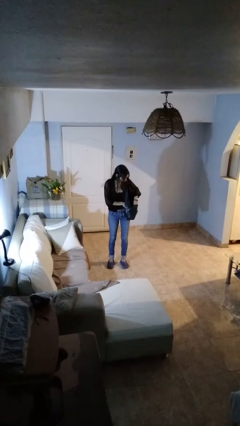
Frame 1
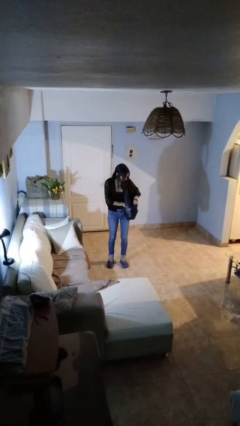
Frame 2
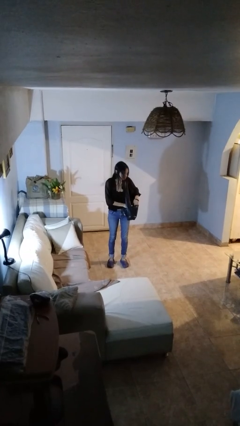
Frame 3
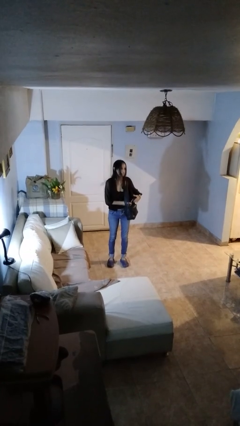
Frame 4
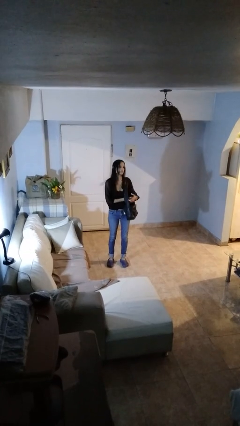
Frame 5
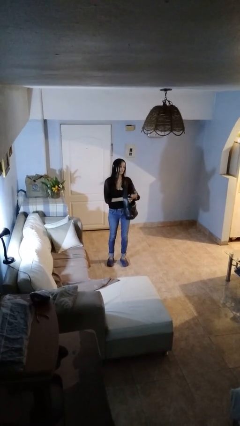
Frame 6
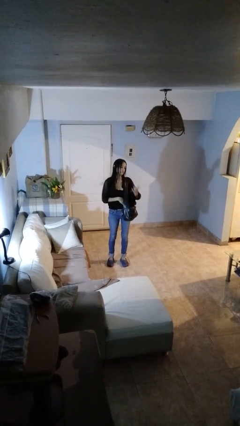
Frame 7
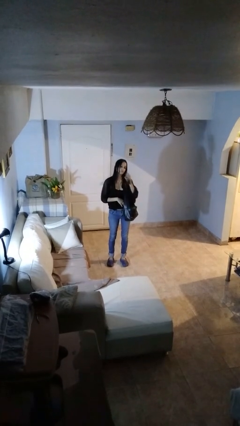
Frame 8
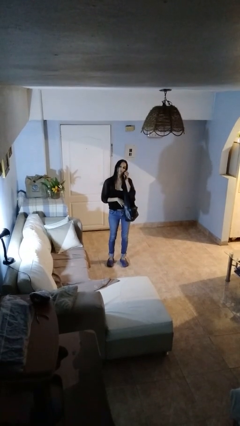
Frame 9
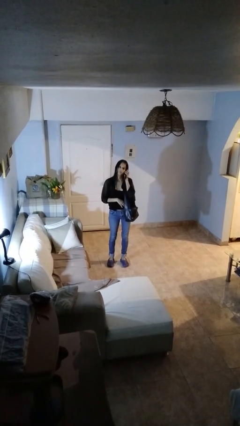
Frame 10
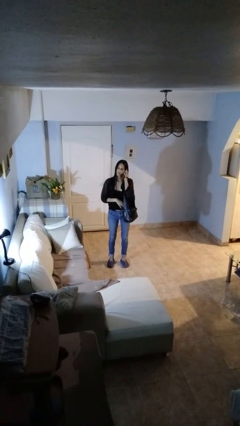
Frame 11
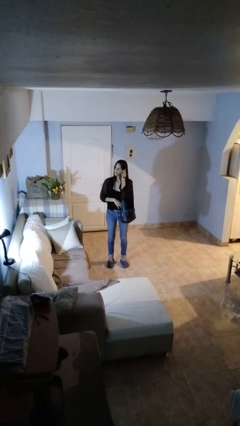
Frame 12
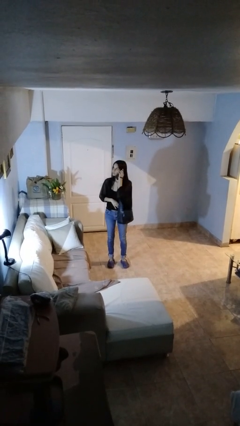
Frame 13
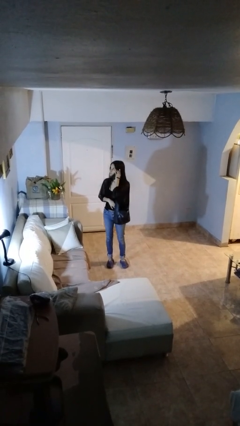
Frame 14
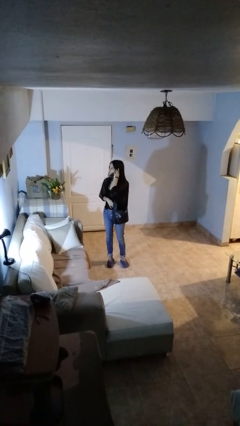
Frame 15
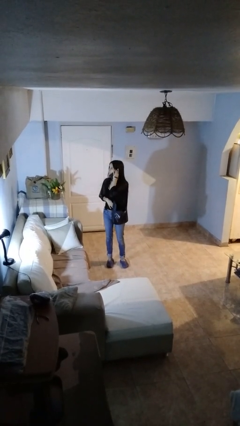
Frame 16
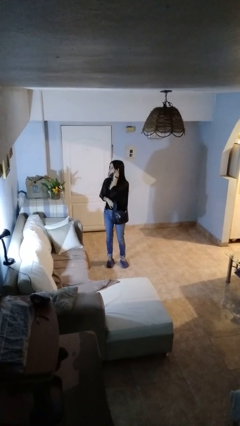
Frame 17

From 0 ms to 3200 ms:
person takes object from purse

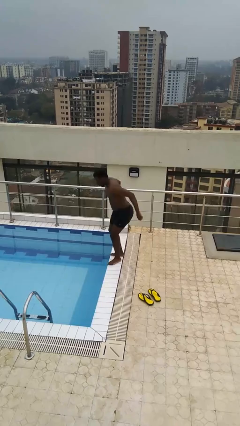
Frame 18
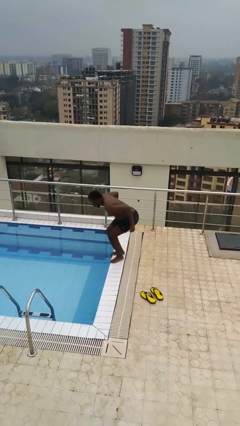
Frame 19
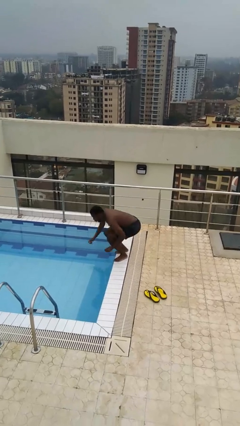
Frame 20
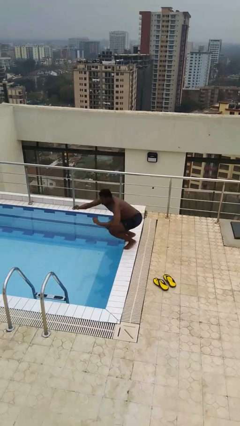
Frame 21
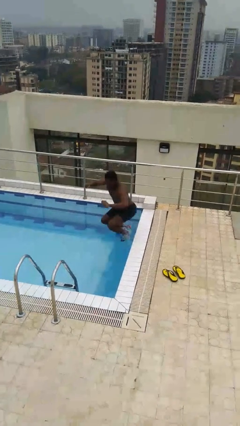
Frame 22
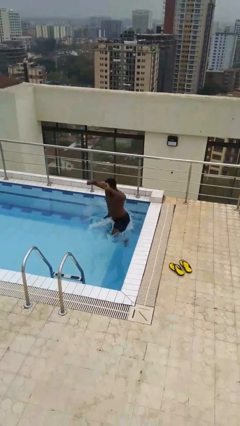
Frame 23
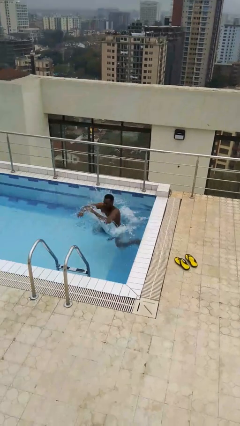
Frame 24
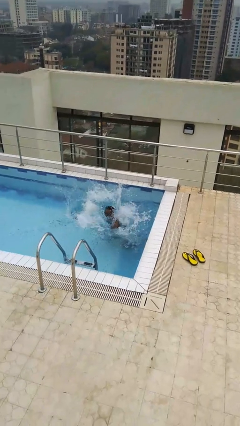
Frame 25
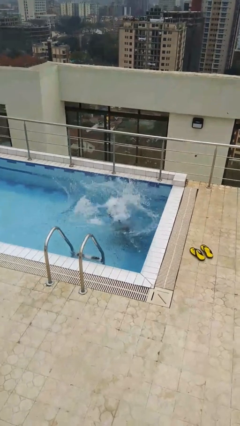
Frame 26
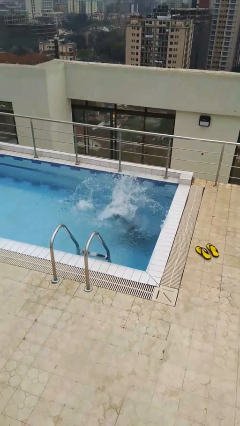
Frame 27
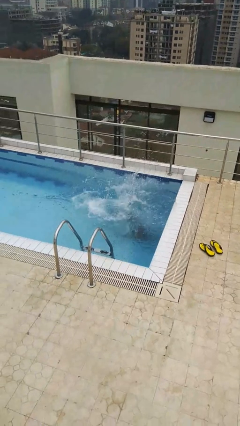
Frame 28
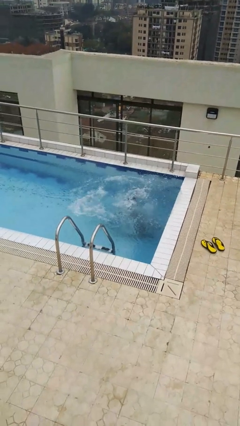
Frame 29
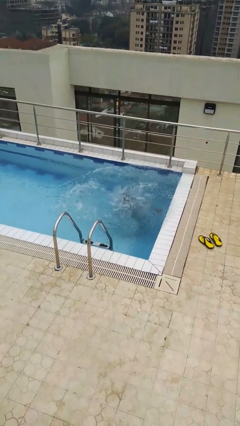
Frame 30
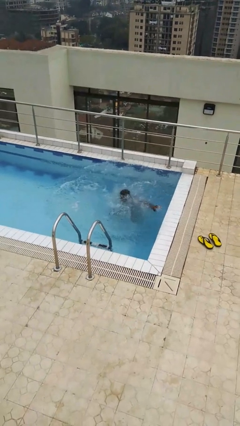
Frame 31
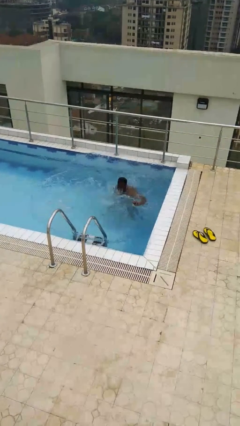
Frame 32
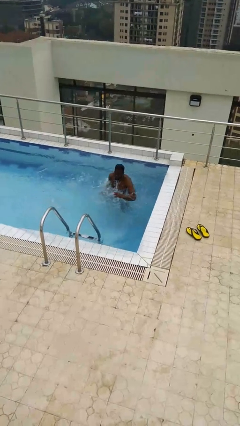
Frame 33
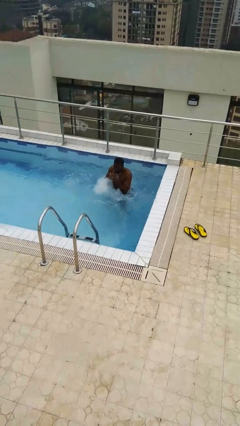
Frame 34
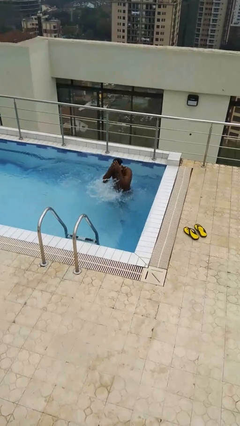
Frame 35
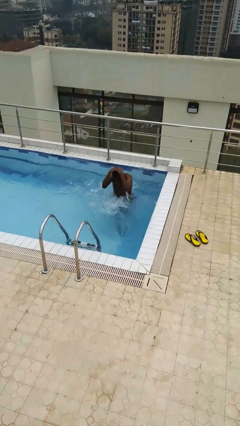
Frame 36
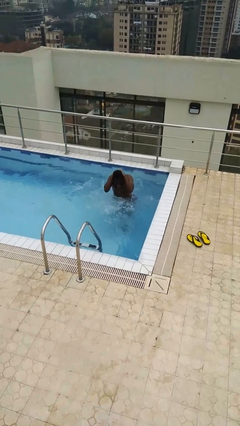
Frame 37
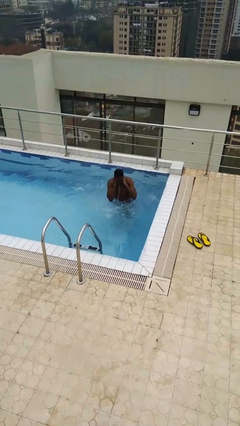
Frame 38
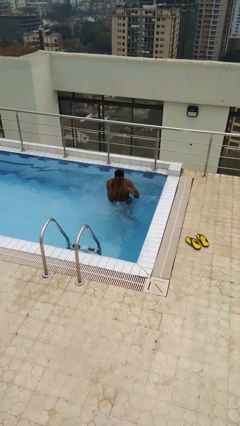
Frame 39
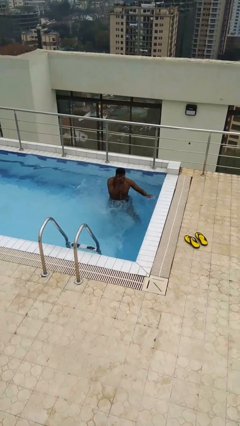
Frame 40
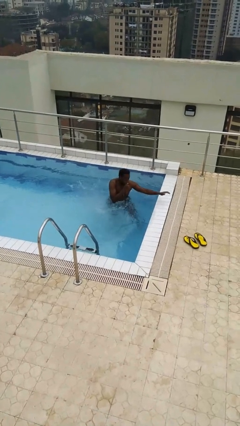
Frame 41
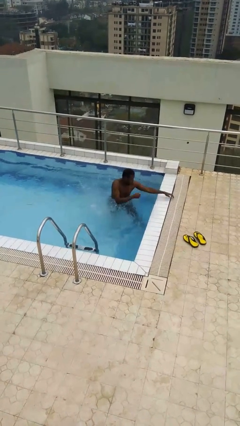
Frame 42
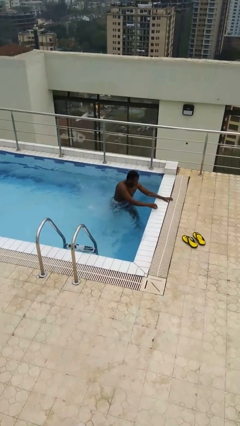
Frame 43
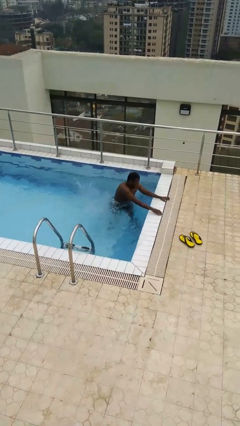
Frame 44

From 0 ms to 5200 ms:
person jumps into pool

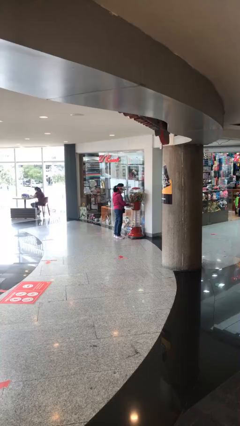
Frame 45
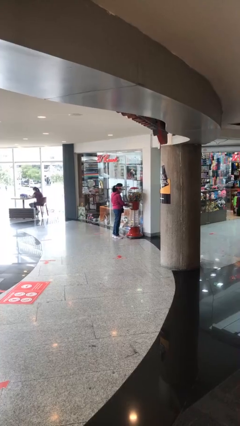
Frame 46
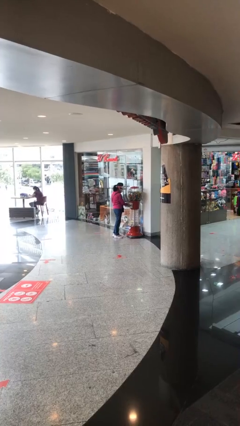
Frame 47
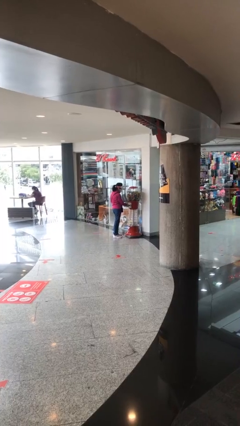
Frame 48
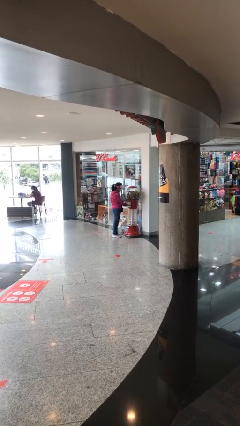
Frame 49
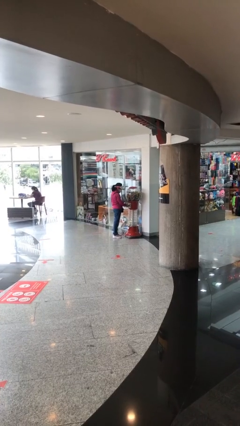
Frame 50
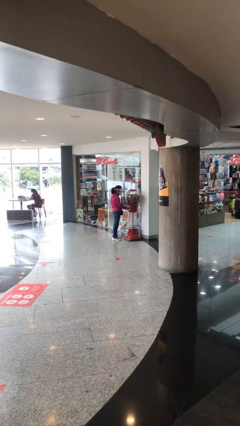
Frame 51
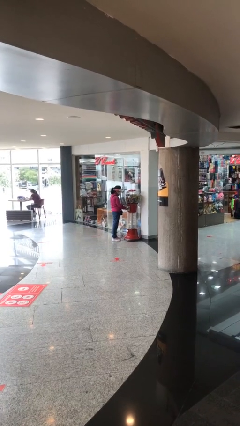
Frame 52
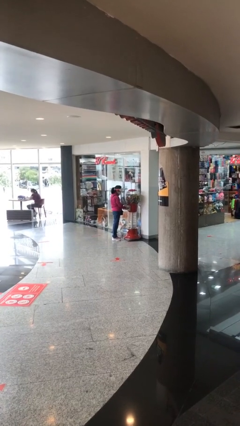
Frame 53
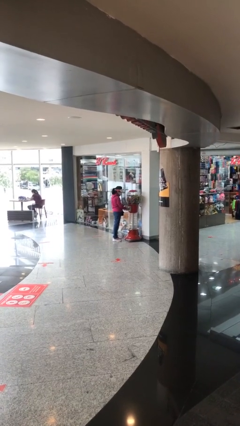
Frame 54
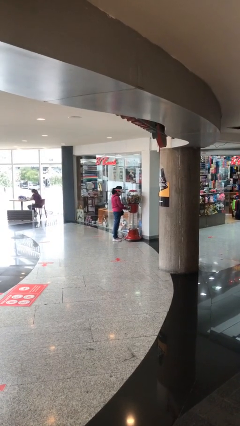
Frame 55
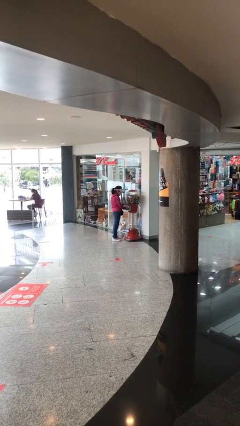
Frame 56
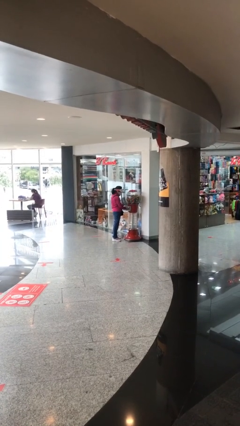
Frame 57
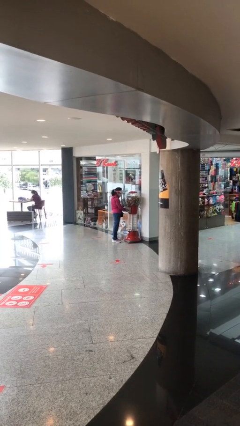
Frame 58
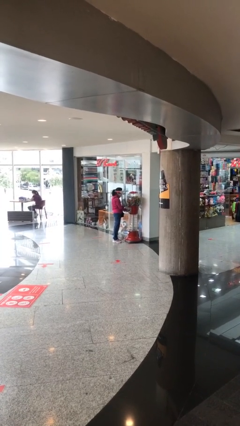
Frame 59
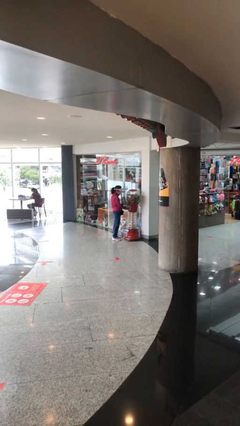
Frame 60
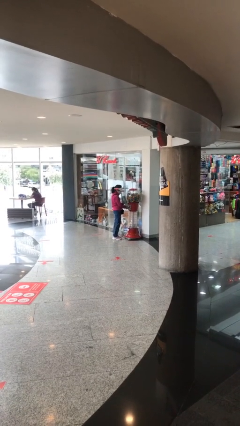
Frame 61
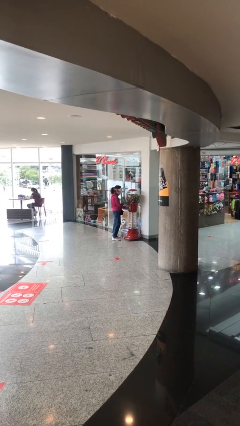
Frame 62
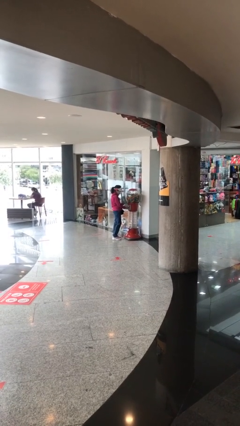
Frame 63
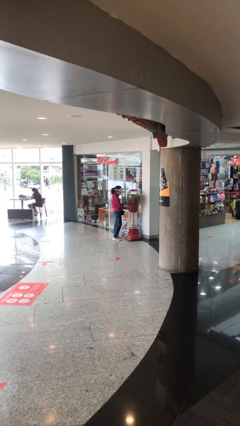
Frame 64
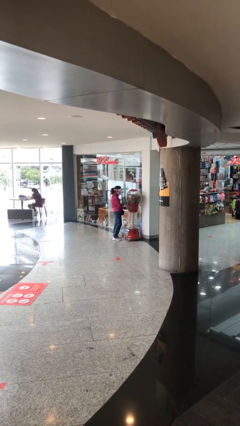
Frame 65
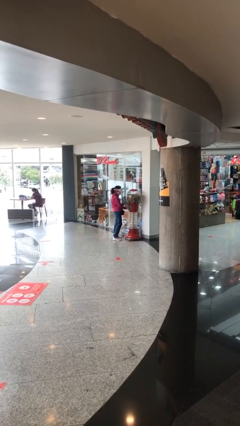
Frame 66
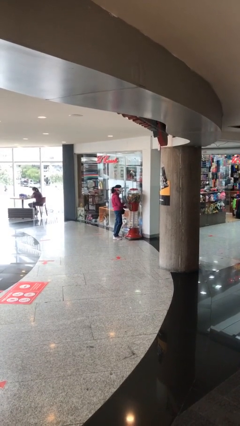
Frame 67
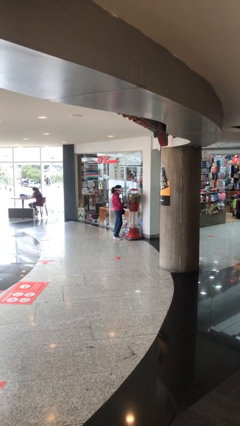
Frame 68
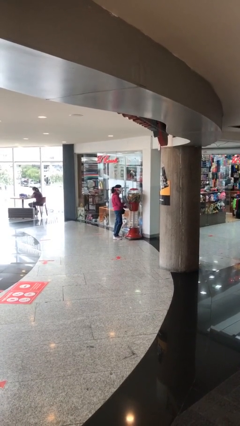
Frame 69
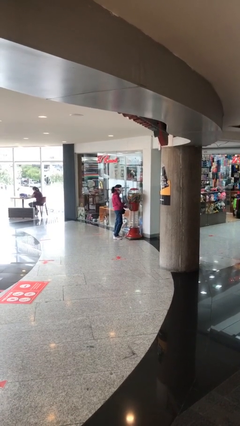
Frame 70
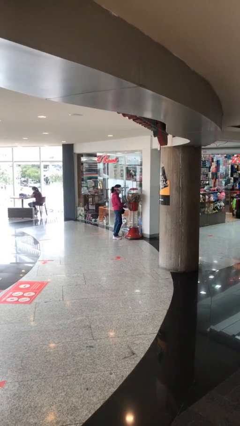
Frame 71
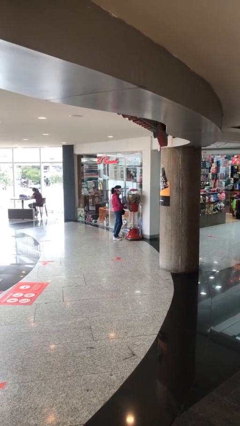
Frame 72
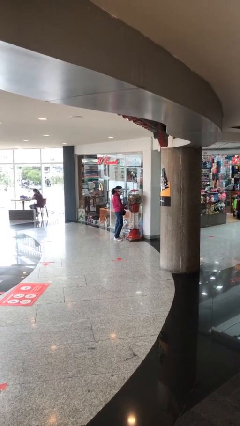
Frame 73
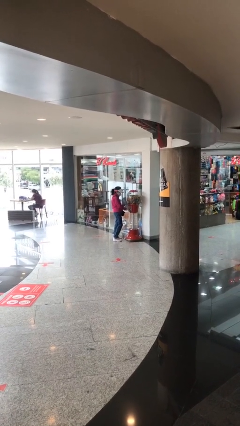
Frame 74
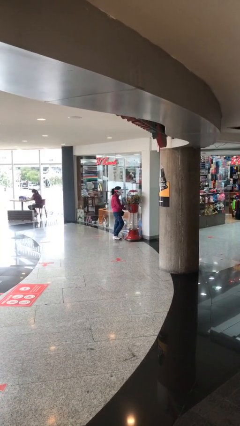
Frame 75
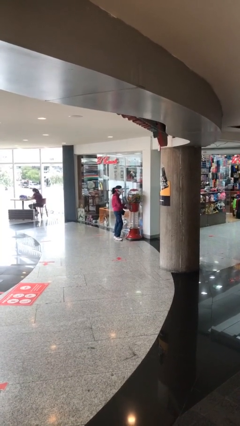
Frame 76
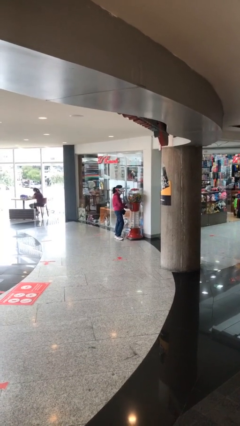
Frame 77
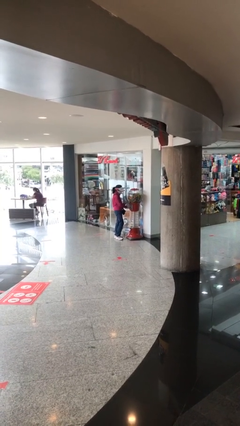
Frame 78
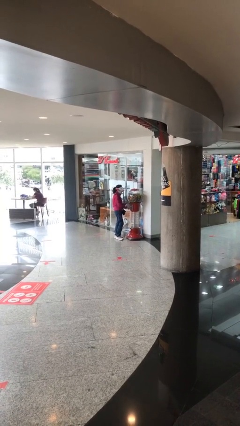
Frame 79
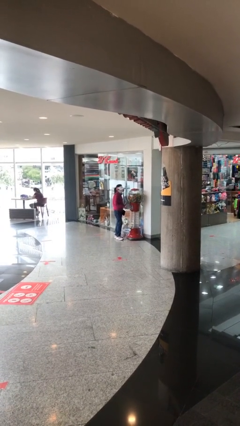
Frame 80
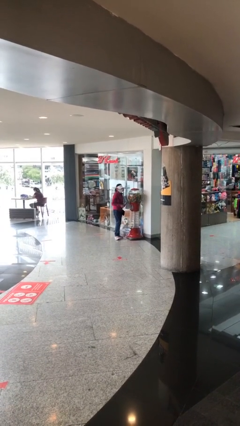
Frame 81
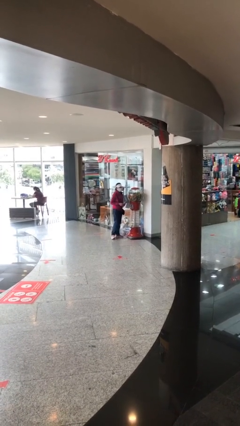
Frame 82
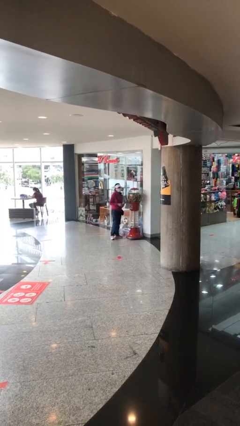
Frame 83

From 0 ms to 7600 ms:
person purchases from machine

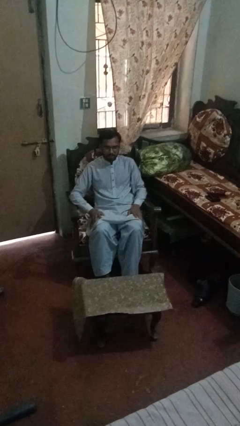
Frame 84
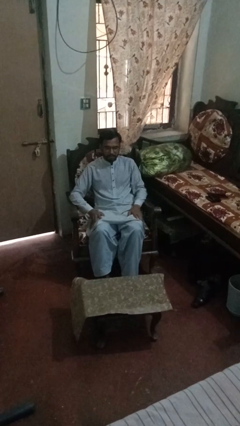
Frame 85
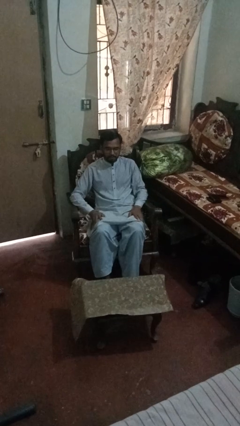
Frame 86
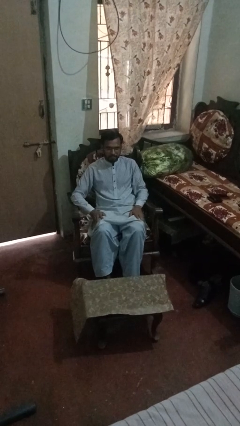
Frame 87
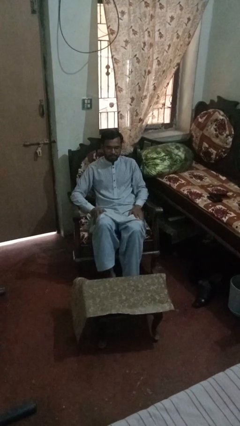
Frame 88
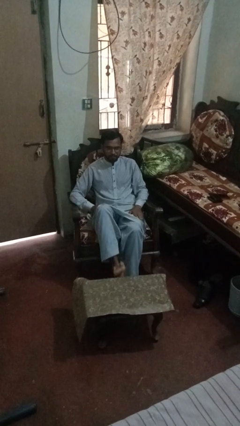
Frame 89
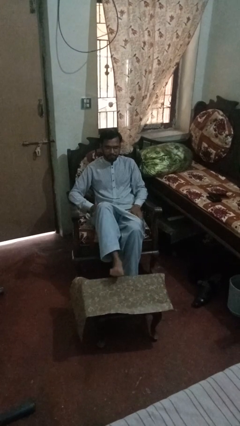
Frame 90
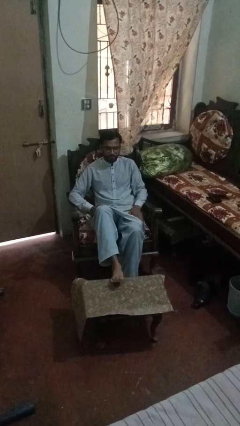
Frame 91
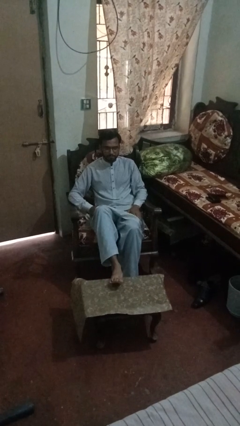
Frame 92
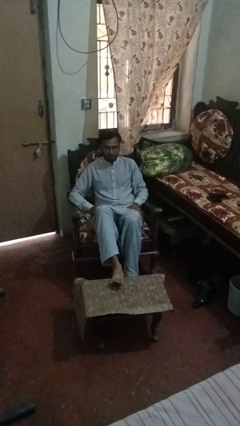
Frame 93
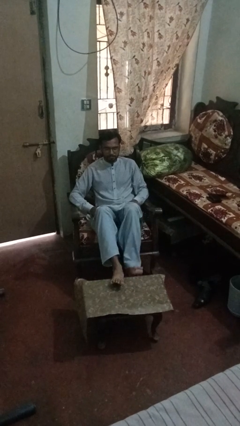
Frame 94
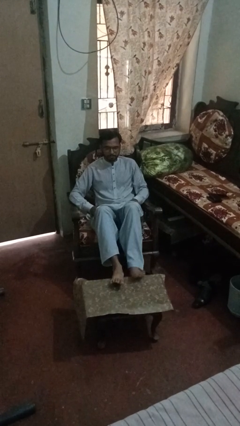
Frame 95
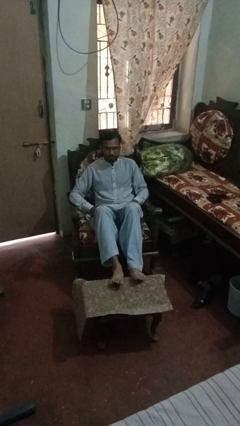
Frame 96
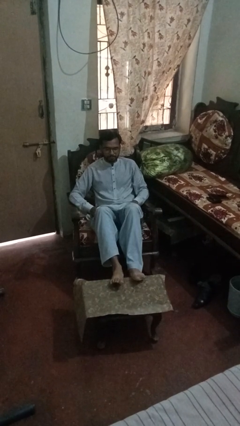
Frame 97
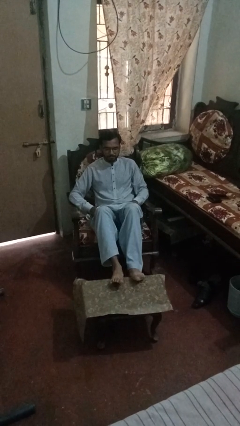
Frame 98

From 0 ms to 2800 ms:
person puts feet up
